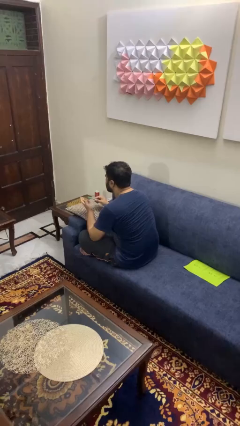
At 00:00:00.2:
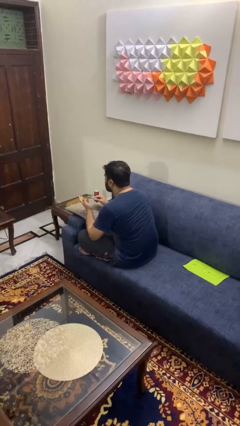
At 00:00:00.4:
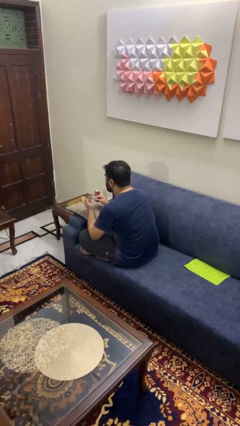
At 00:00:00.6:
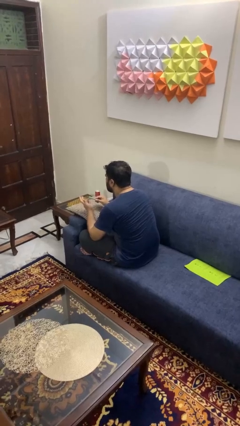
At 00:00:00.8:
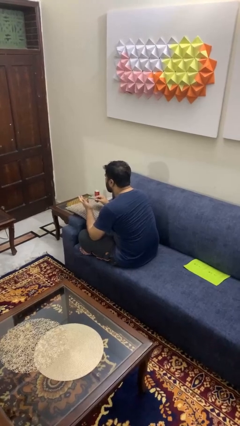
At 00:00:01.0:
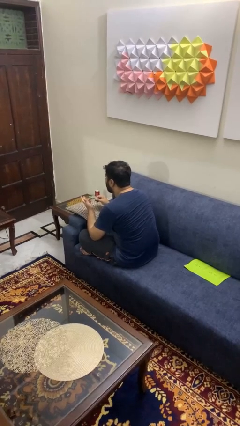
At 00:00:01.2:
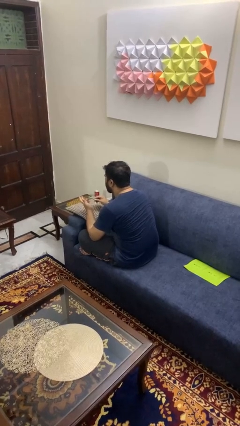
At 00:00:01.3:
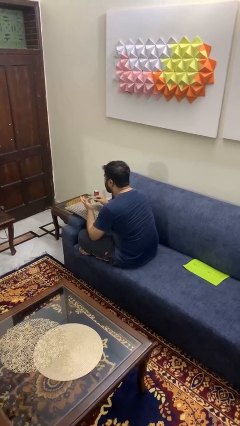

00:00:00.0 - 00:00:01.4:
person files fingernails

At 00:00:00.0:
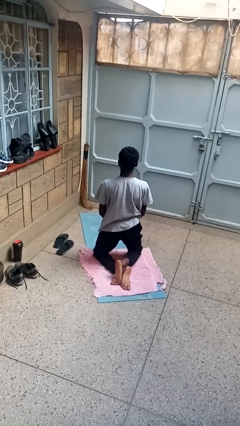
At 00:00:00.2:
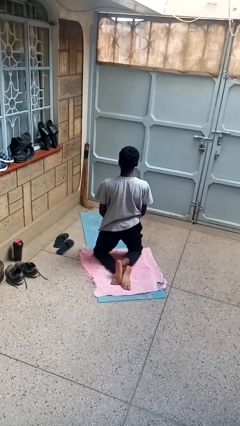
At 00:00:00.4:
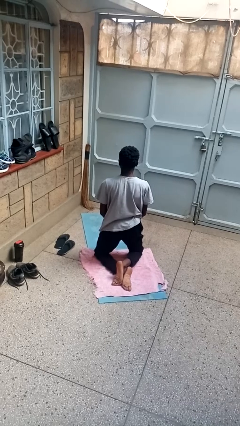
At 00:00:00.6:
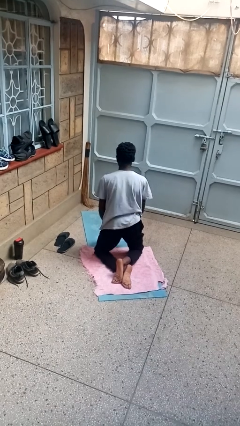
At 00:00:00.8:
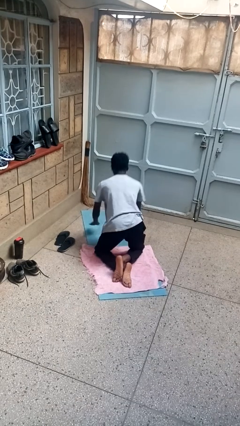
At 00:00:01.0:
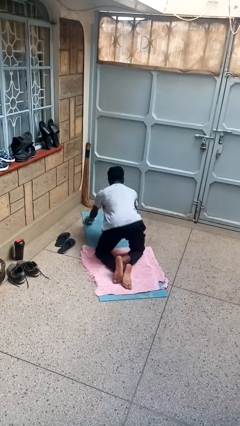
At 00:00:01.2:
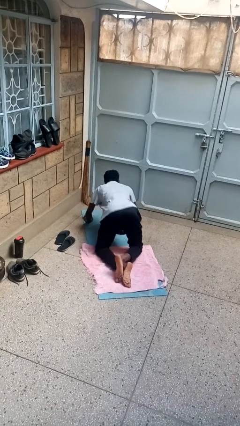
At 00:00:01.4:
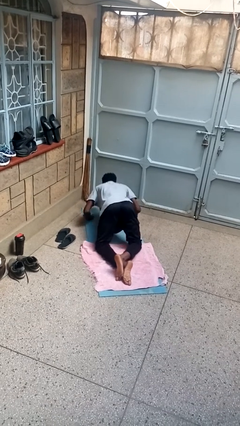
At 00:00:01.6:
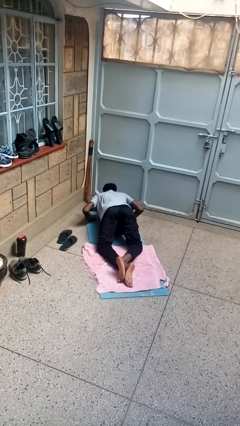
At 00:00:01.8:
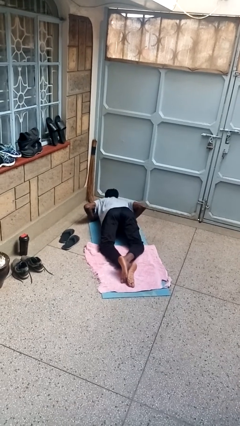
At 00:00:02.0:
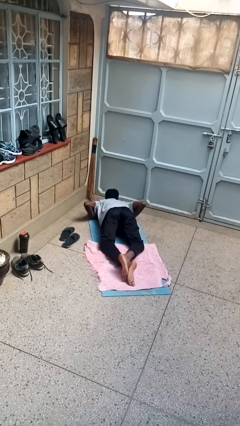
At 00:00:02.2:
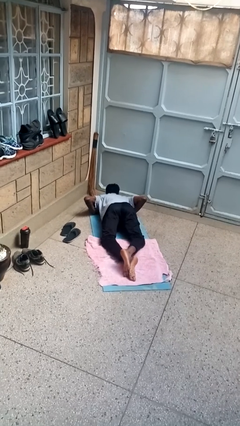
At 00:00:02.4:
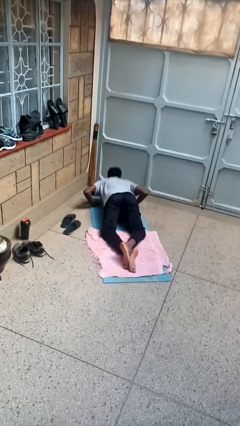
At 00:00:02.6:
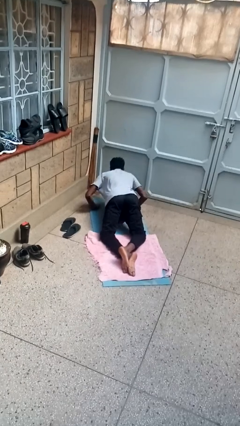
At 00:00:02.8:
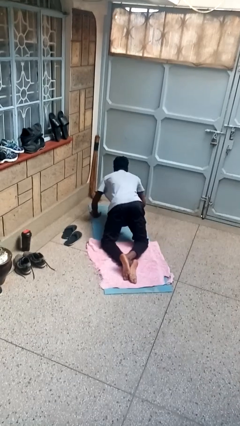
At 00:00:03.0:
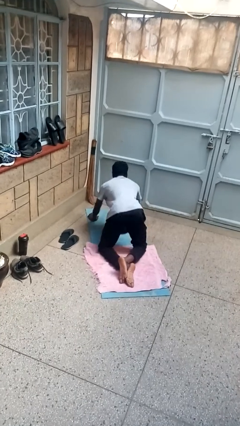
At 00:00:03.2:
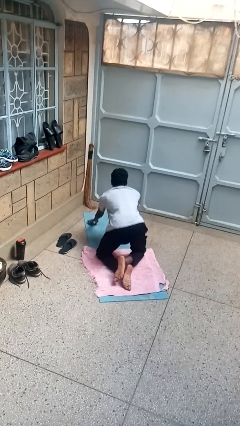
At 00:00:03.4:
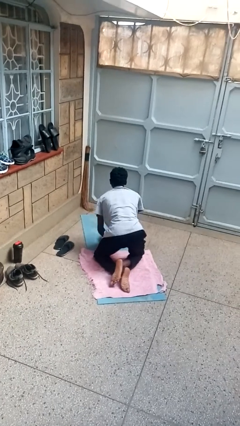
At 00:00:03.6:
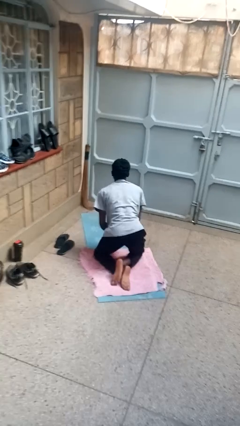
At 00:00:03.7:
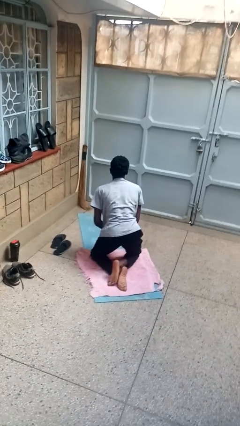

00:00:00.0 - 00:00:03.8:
person exercises with pushup

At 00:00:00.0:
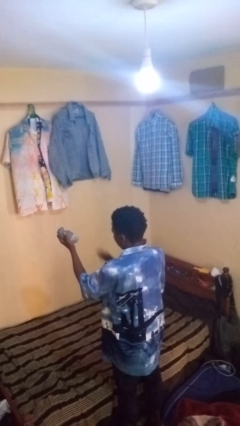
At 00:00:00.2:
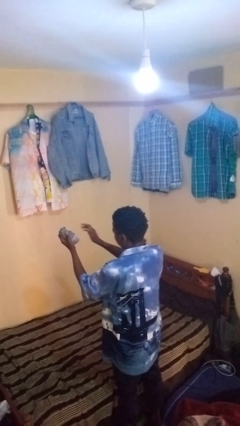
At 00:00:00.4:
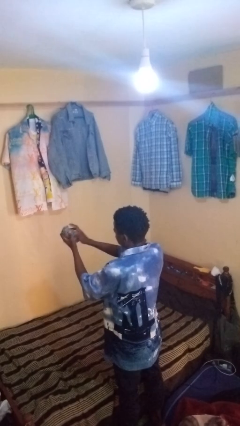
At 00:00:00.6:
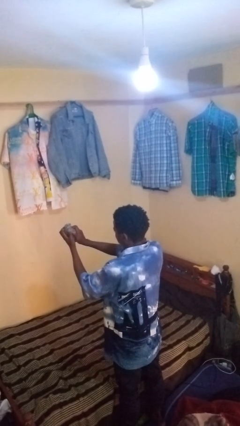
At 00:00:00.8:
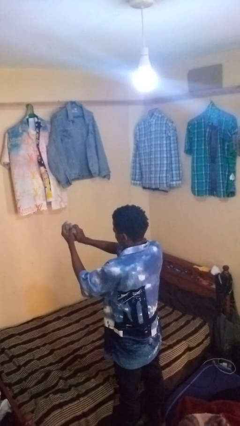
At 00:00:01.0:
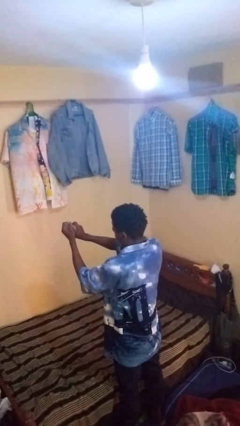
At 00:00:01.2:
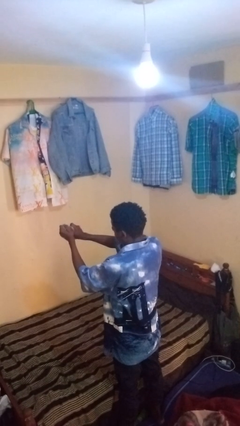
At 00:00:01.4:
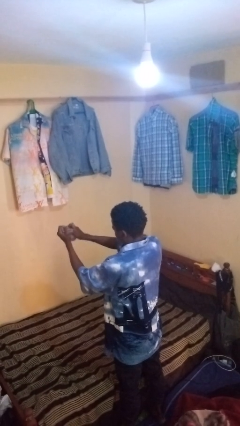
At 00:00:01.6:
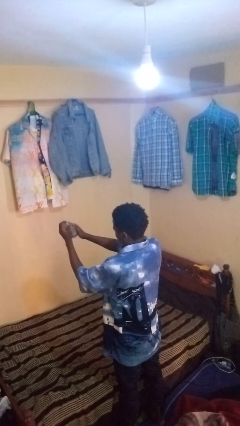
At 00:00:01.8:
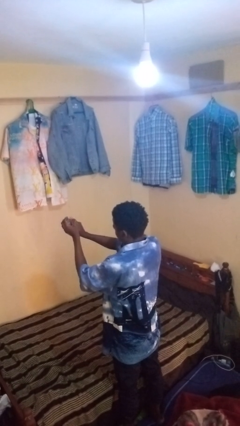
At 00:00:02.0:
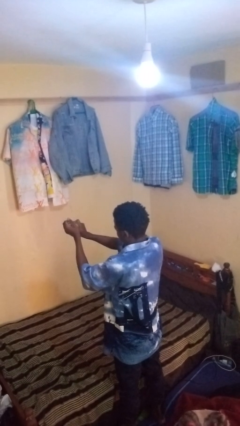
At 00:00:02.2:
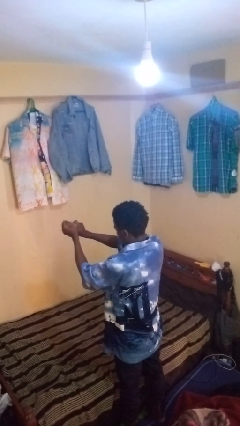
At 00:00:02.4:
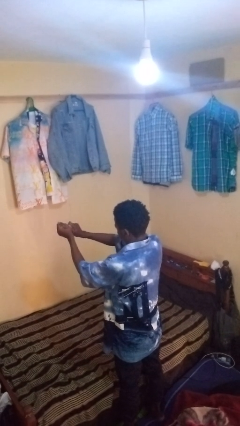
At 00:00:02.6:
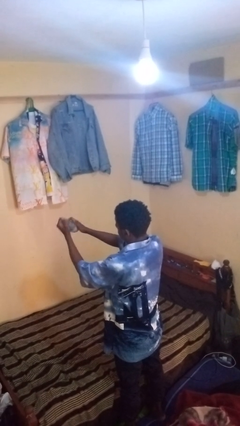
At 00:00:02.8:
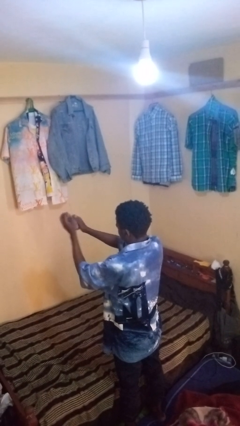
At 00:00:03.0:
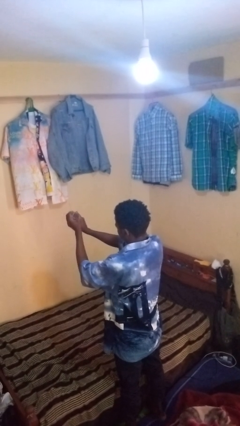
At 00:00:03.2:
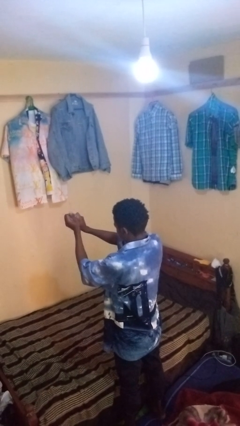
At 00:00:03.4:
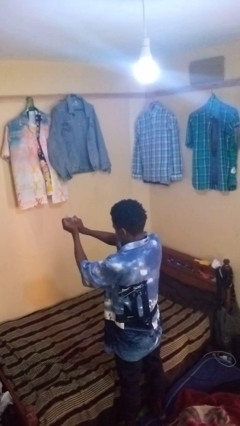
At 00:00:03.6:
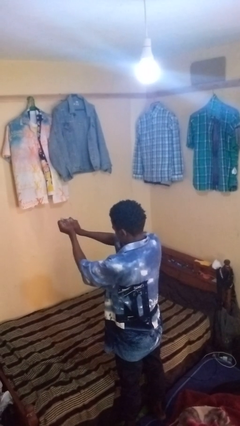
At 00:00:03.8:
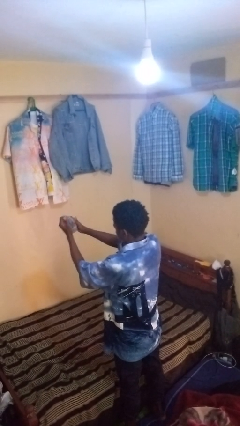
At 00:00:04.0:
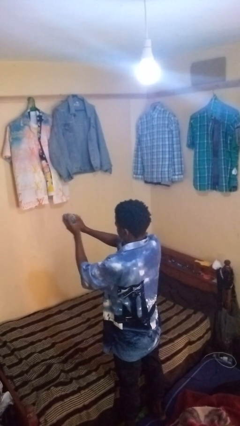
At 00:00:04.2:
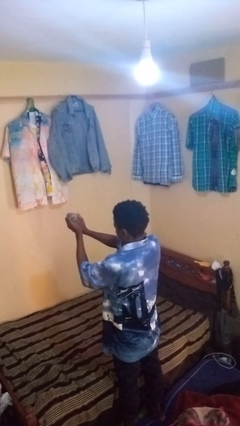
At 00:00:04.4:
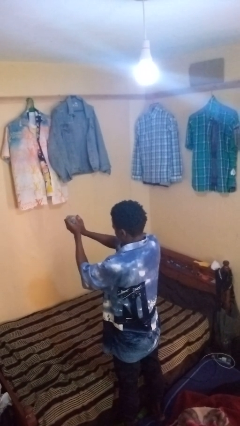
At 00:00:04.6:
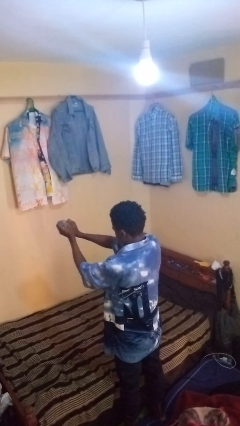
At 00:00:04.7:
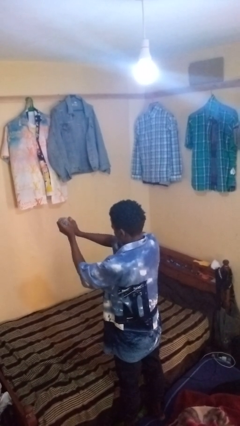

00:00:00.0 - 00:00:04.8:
person squeezes object

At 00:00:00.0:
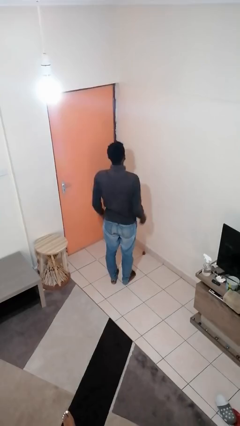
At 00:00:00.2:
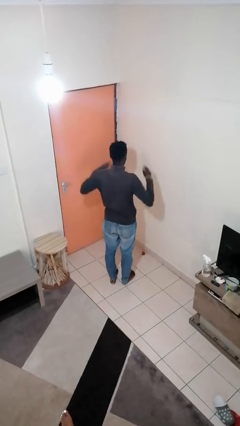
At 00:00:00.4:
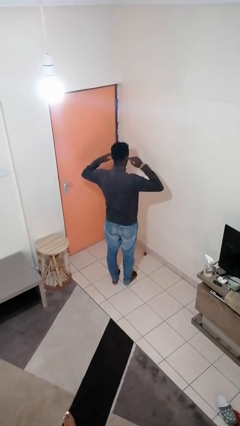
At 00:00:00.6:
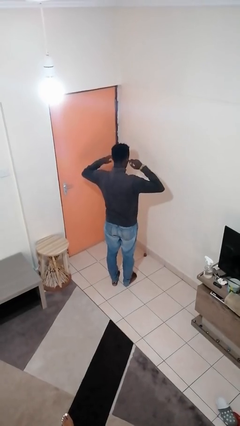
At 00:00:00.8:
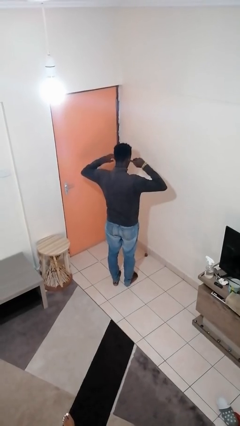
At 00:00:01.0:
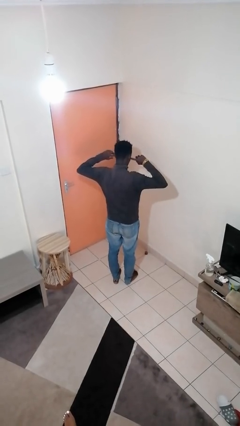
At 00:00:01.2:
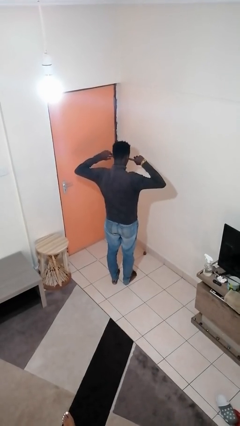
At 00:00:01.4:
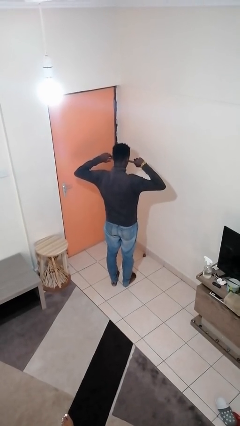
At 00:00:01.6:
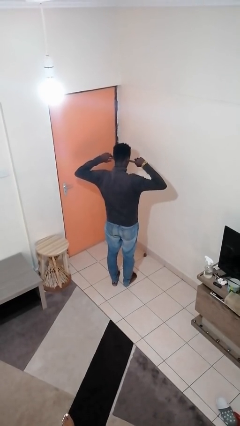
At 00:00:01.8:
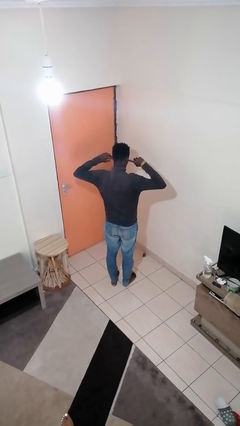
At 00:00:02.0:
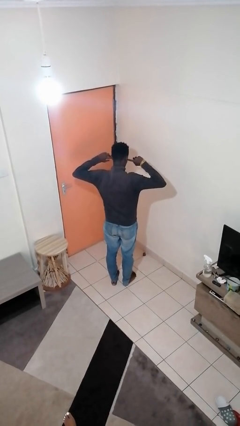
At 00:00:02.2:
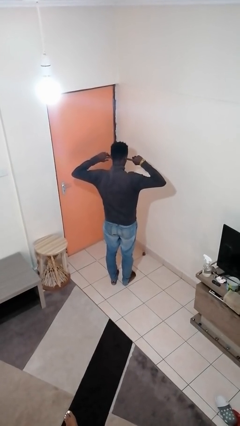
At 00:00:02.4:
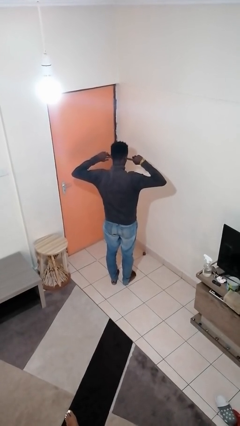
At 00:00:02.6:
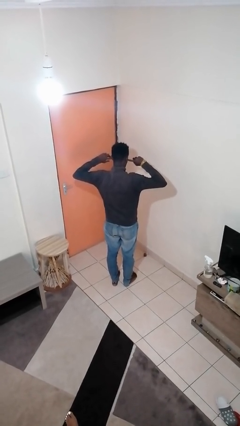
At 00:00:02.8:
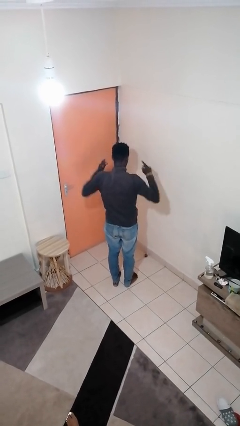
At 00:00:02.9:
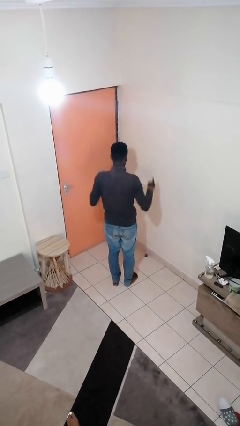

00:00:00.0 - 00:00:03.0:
person puts fingers in ear

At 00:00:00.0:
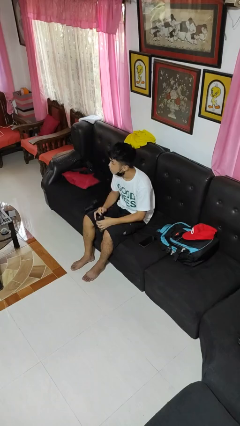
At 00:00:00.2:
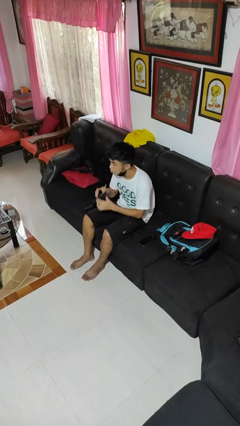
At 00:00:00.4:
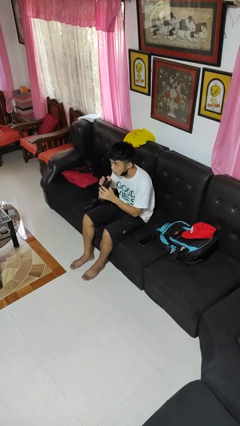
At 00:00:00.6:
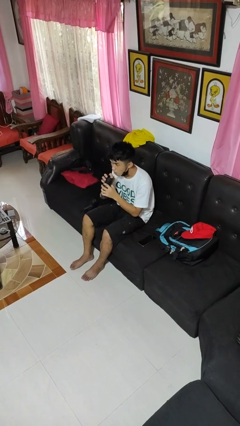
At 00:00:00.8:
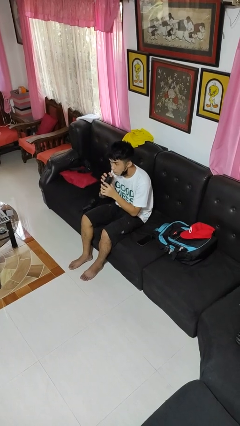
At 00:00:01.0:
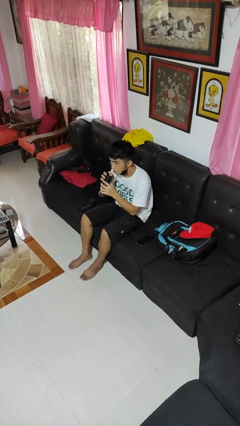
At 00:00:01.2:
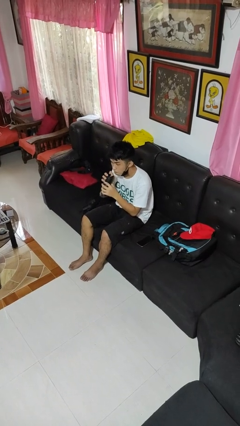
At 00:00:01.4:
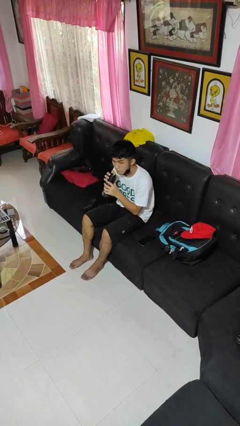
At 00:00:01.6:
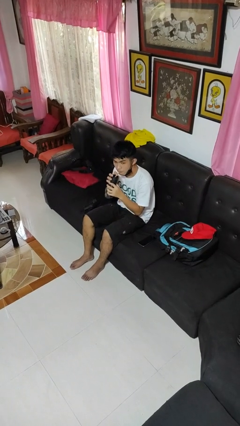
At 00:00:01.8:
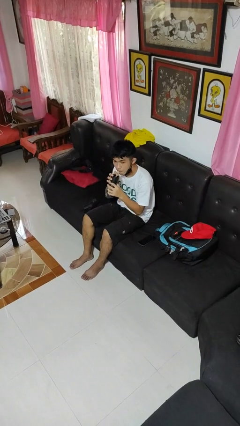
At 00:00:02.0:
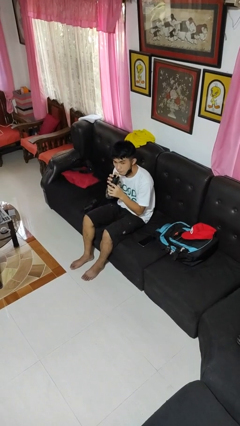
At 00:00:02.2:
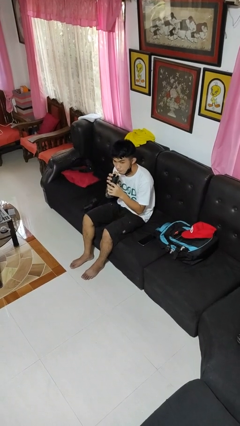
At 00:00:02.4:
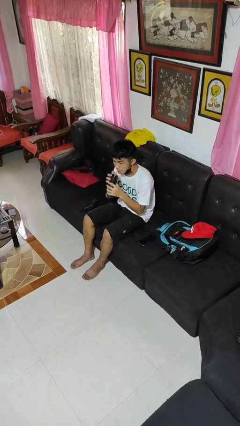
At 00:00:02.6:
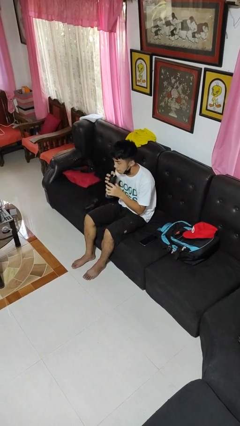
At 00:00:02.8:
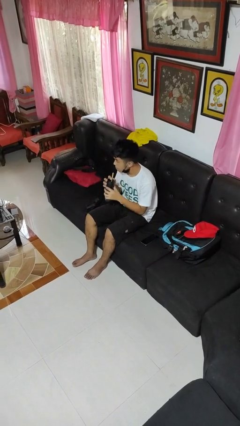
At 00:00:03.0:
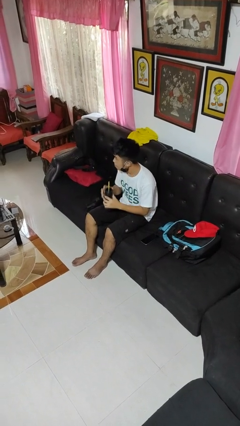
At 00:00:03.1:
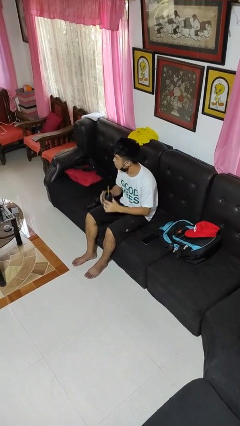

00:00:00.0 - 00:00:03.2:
person drinks from straw

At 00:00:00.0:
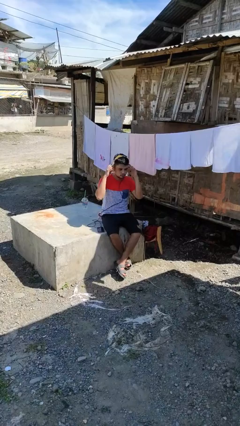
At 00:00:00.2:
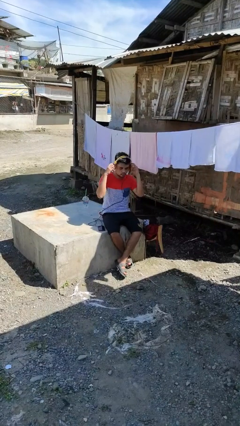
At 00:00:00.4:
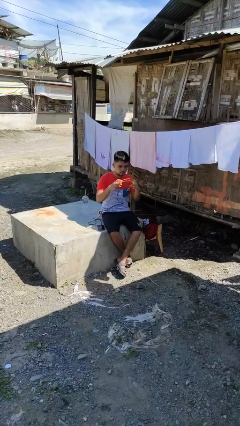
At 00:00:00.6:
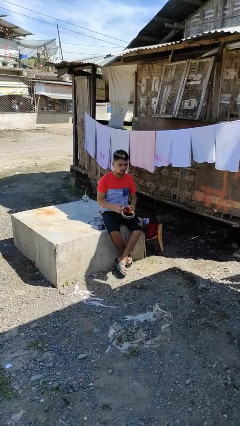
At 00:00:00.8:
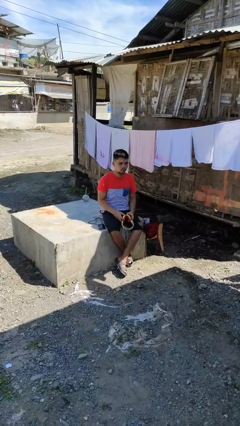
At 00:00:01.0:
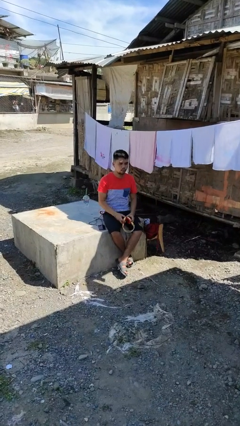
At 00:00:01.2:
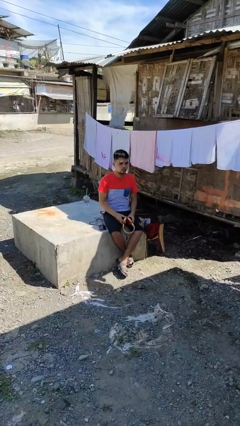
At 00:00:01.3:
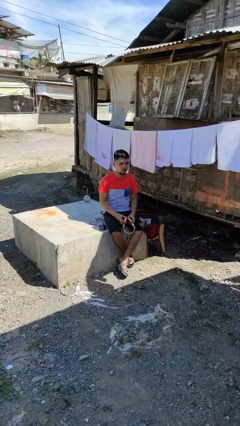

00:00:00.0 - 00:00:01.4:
person takes off headphones
